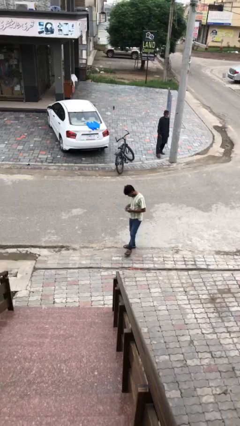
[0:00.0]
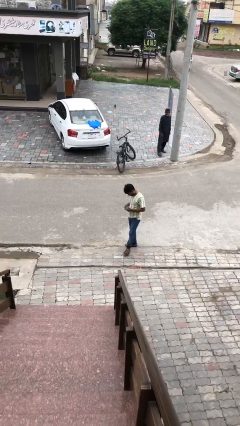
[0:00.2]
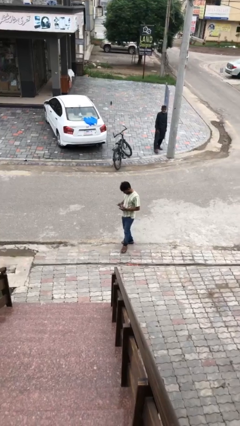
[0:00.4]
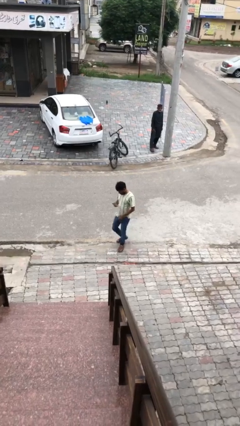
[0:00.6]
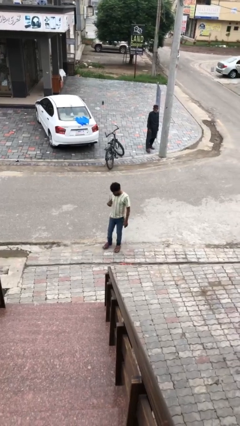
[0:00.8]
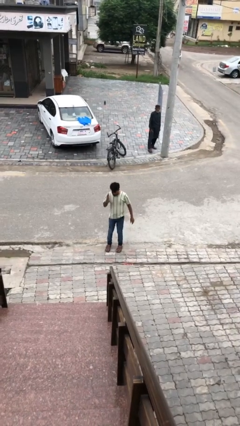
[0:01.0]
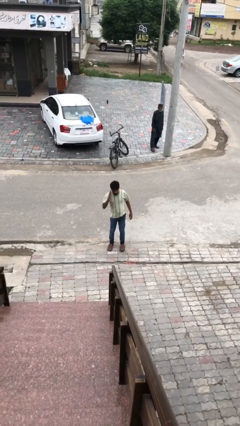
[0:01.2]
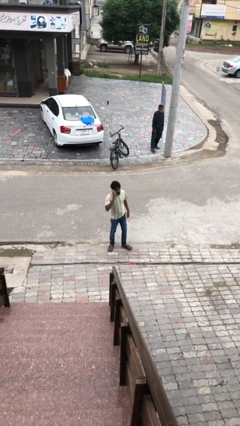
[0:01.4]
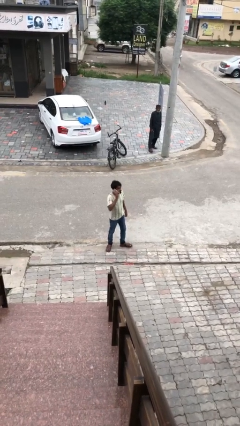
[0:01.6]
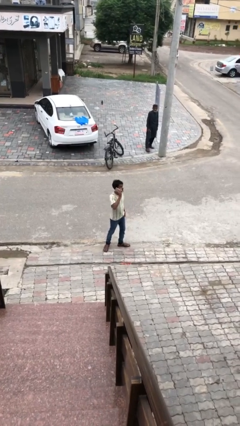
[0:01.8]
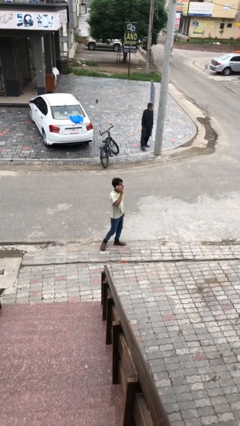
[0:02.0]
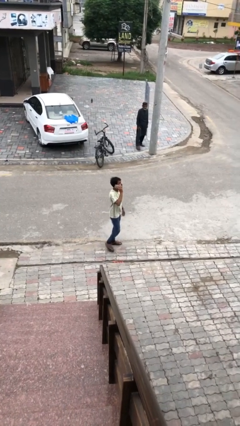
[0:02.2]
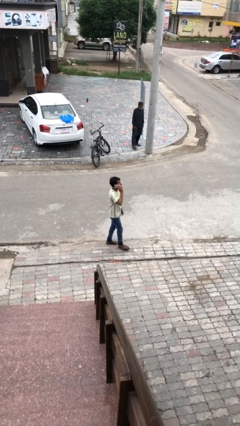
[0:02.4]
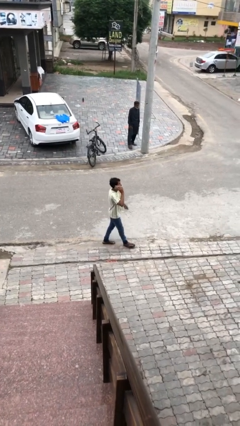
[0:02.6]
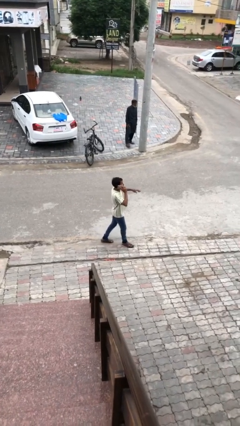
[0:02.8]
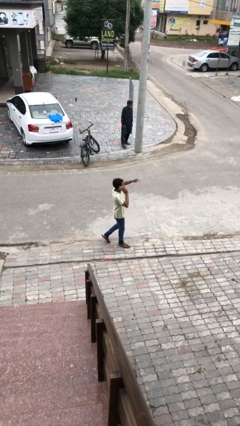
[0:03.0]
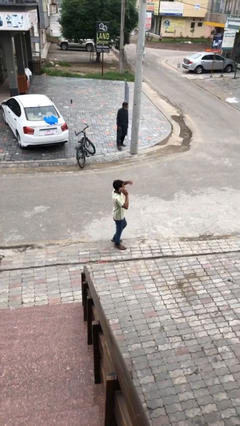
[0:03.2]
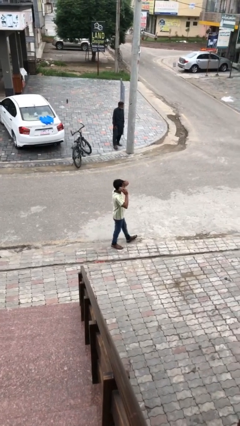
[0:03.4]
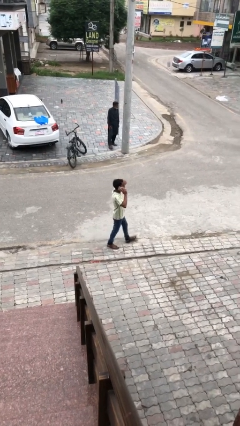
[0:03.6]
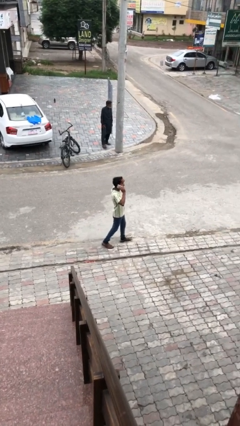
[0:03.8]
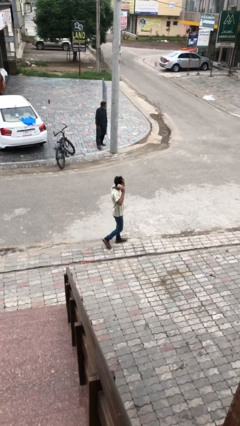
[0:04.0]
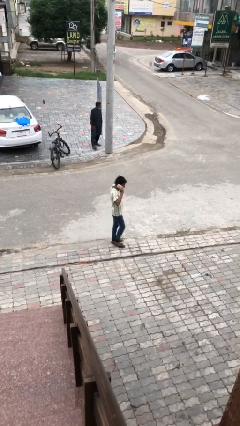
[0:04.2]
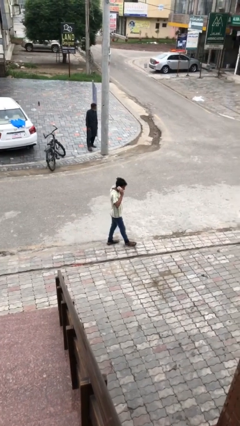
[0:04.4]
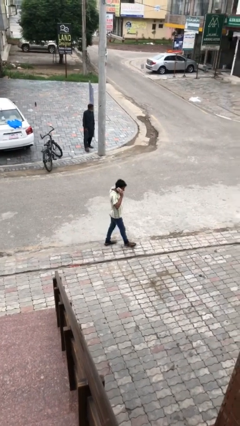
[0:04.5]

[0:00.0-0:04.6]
person talks on phone

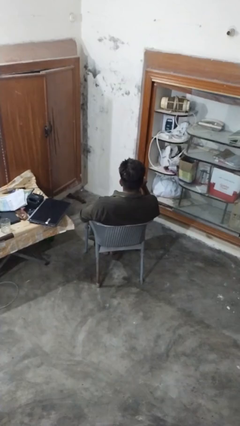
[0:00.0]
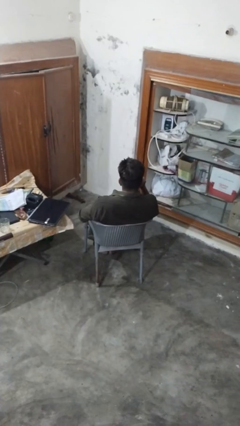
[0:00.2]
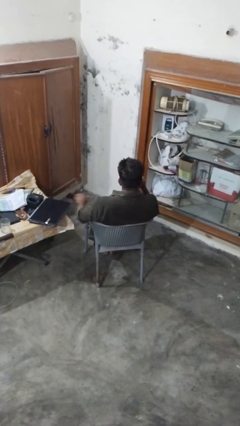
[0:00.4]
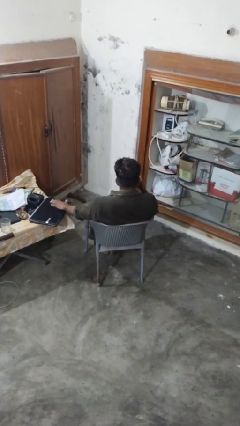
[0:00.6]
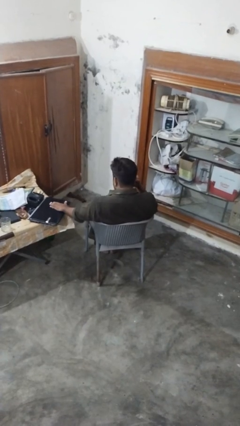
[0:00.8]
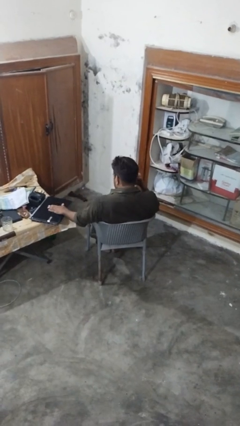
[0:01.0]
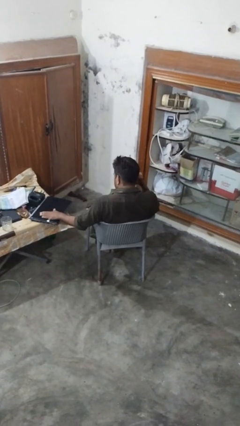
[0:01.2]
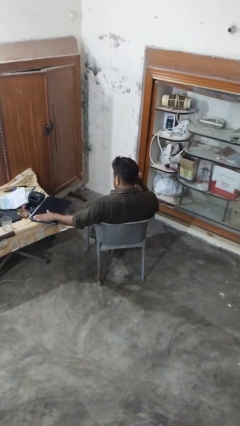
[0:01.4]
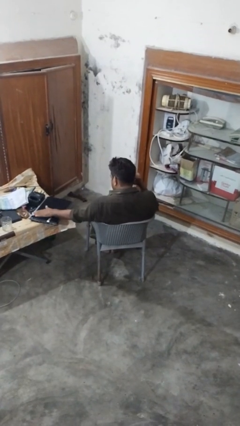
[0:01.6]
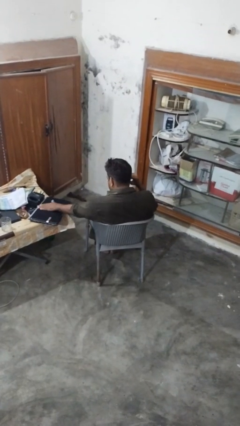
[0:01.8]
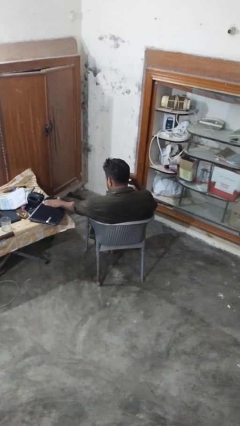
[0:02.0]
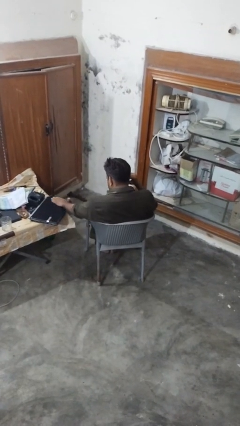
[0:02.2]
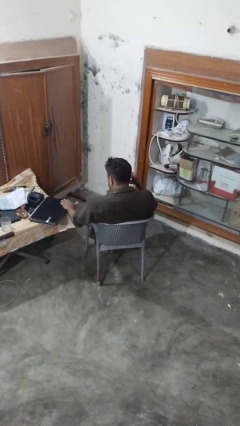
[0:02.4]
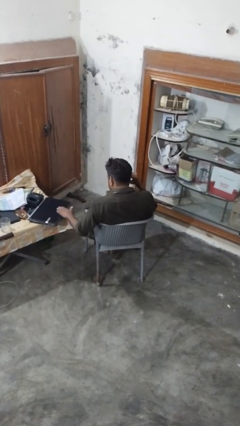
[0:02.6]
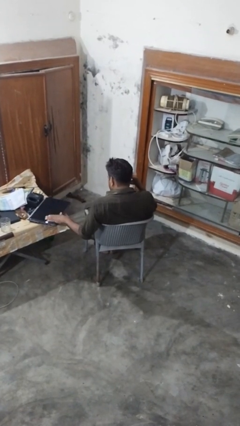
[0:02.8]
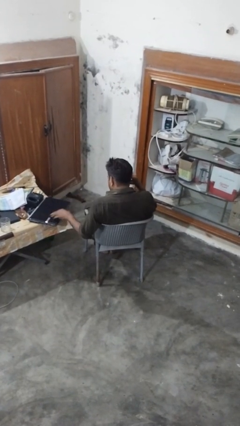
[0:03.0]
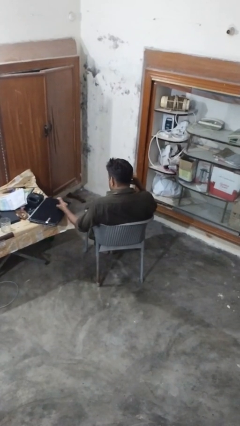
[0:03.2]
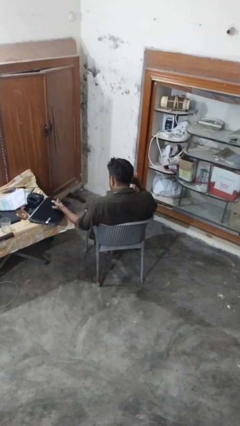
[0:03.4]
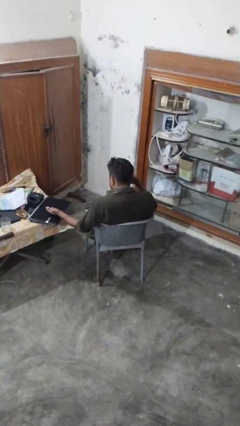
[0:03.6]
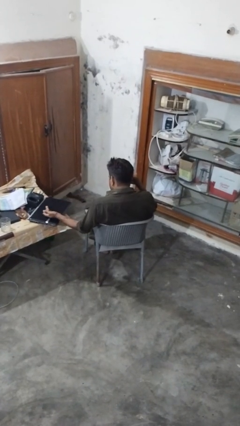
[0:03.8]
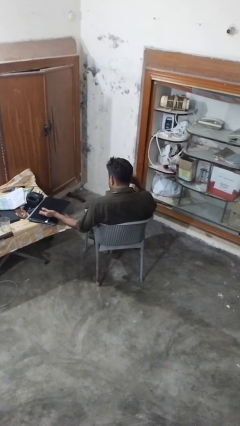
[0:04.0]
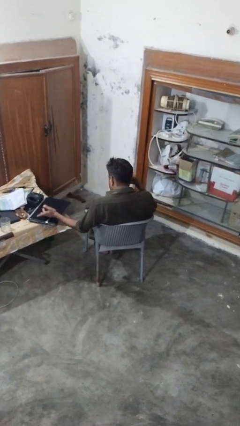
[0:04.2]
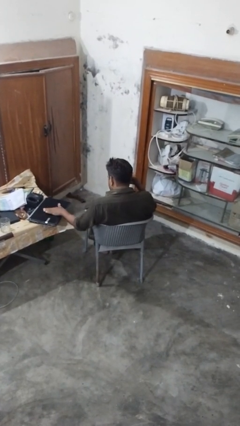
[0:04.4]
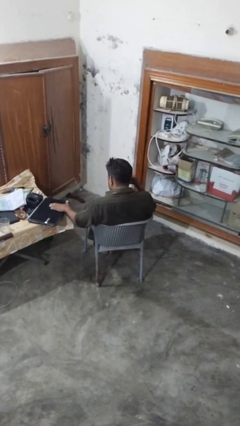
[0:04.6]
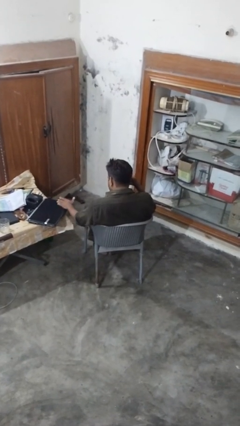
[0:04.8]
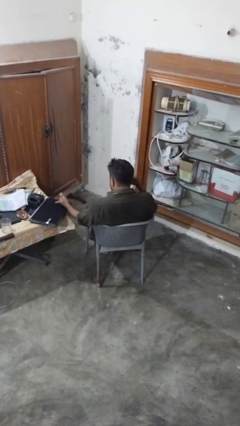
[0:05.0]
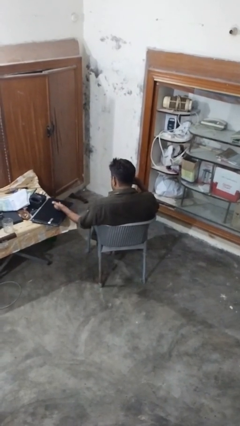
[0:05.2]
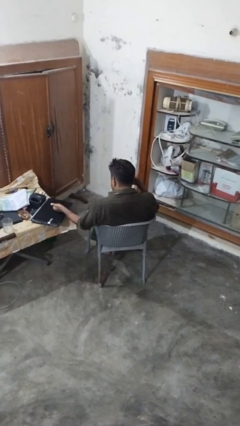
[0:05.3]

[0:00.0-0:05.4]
person waves hand over object

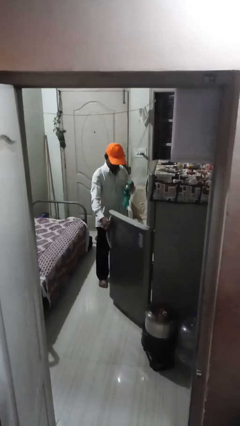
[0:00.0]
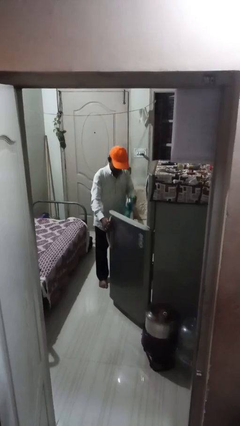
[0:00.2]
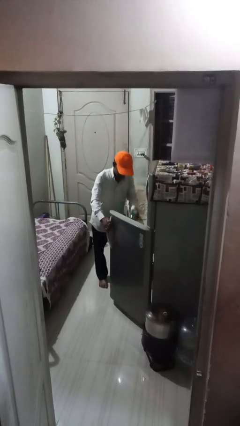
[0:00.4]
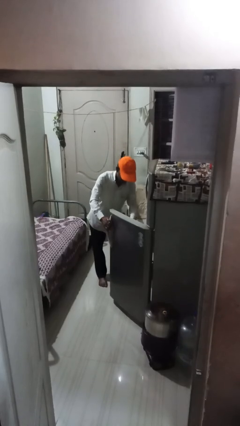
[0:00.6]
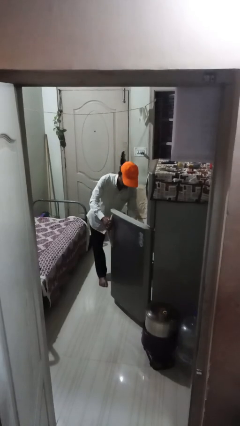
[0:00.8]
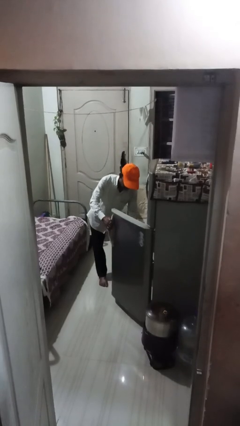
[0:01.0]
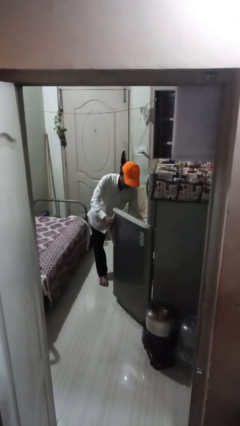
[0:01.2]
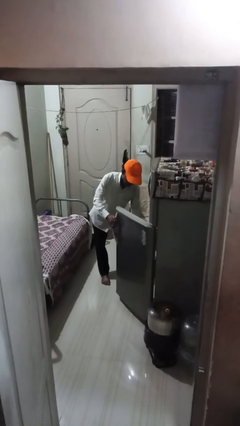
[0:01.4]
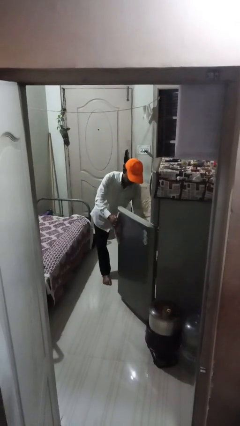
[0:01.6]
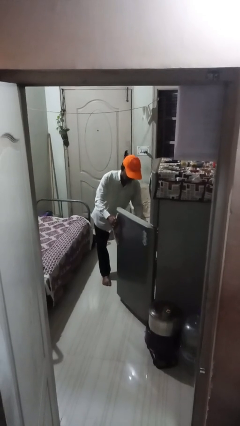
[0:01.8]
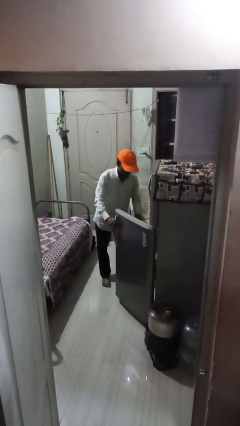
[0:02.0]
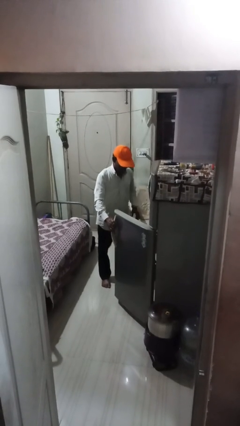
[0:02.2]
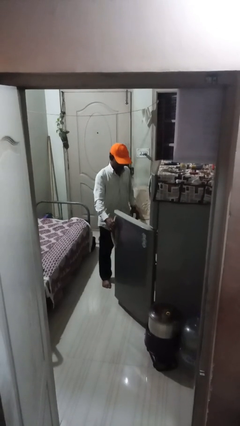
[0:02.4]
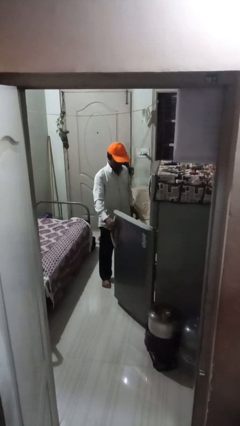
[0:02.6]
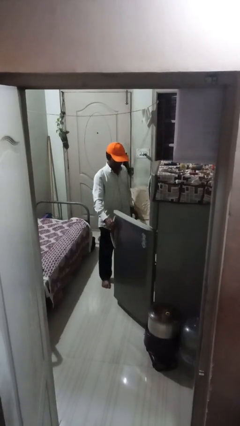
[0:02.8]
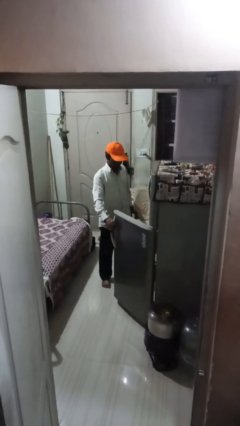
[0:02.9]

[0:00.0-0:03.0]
person puts object into refrigerator

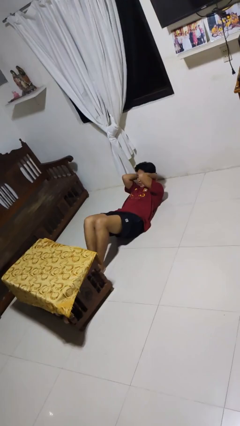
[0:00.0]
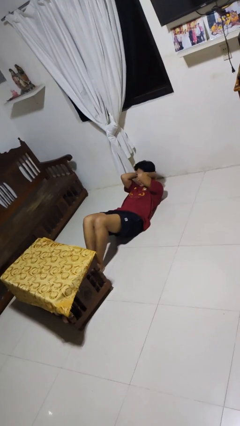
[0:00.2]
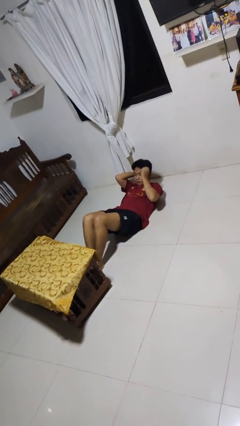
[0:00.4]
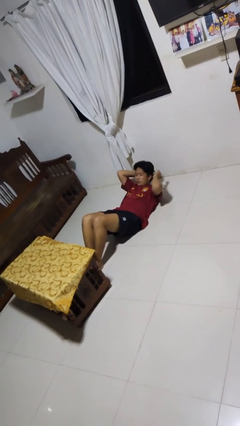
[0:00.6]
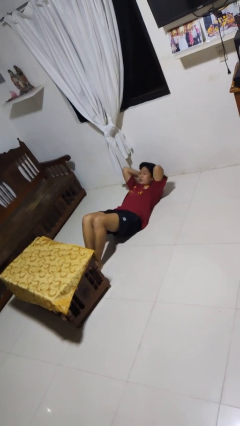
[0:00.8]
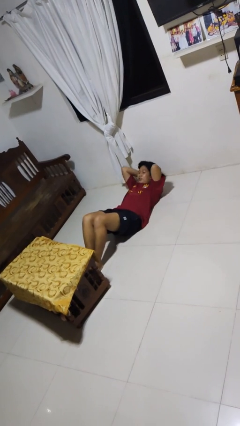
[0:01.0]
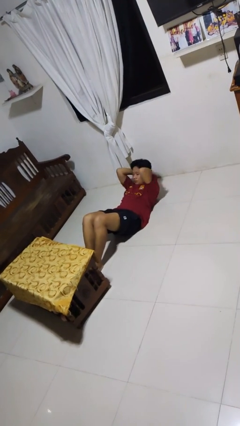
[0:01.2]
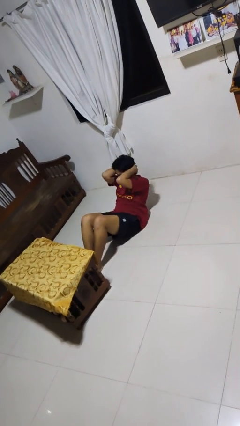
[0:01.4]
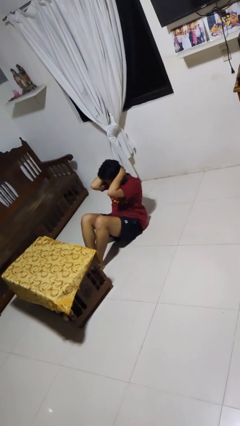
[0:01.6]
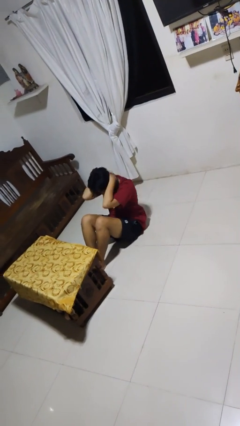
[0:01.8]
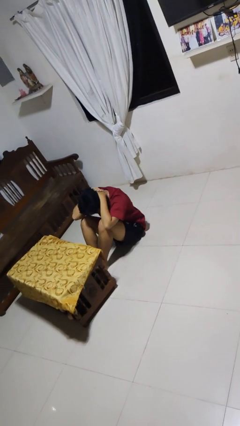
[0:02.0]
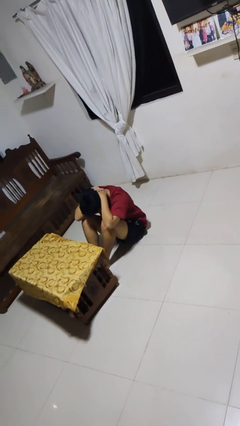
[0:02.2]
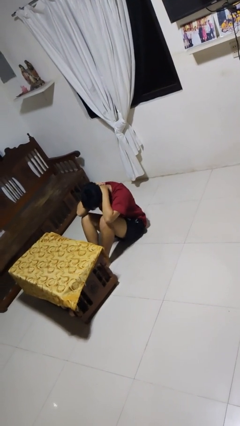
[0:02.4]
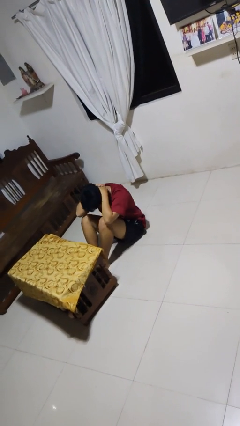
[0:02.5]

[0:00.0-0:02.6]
person exercises with situp

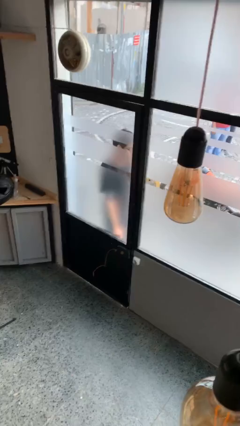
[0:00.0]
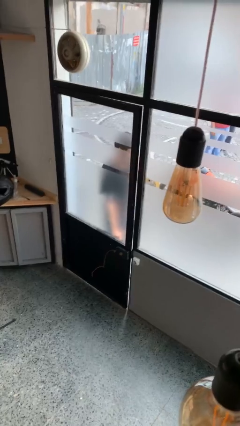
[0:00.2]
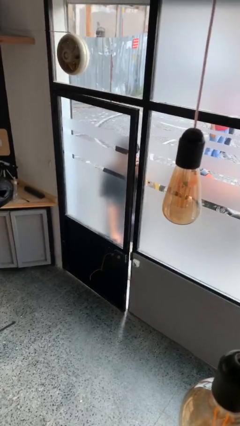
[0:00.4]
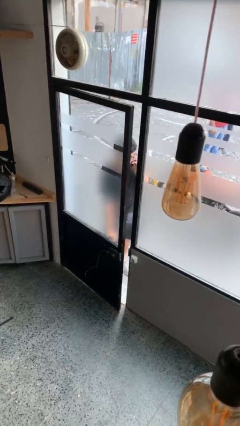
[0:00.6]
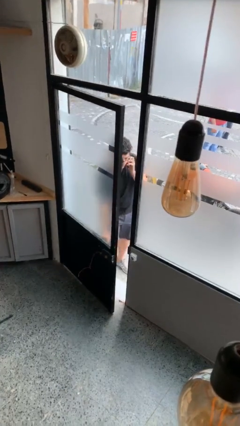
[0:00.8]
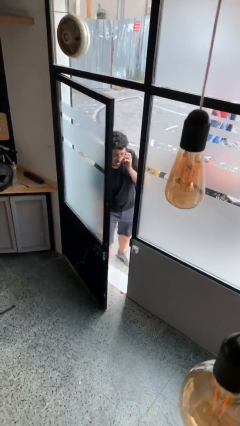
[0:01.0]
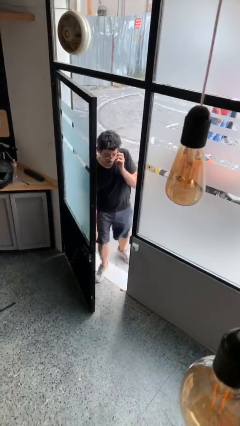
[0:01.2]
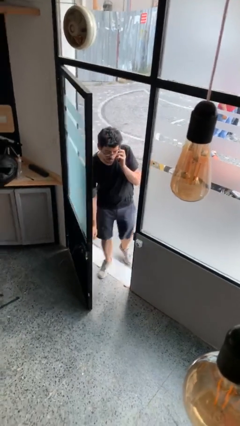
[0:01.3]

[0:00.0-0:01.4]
person opens facility door

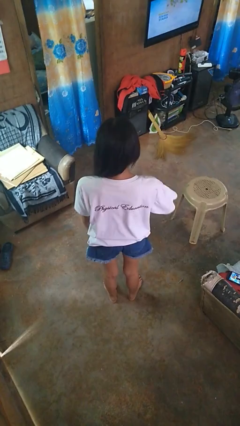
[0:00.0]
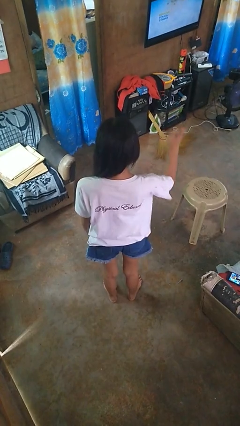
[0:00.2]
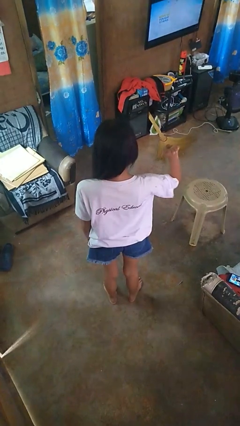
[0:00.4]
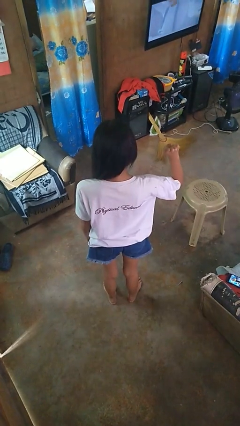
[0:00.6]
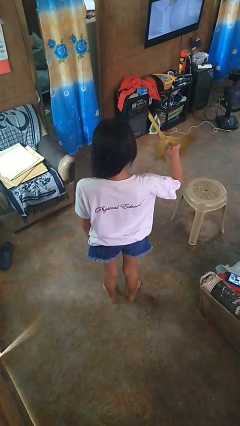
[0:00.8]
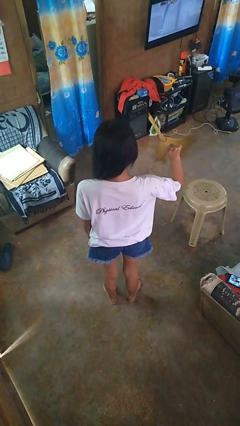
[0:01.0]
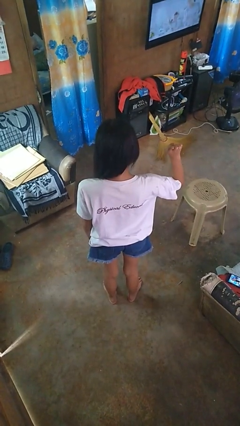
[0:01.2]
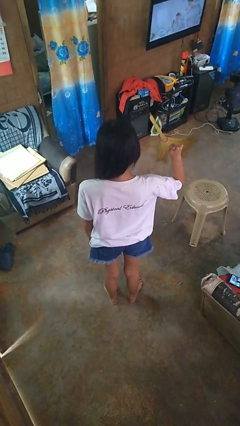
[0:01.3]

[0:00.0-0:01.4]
person gestures number four
